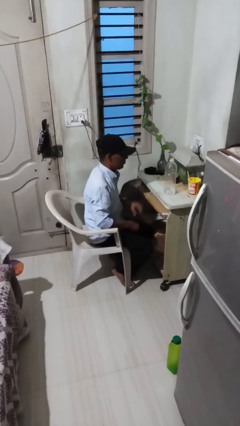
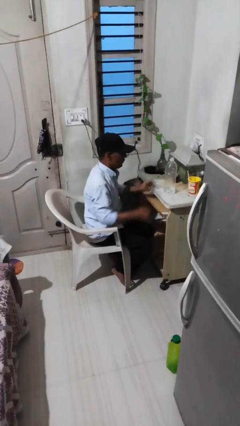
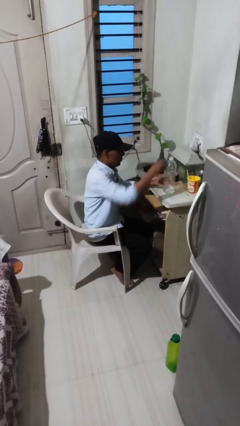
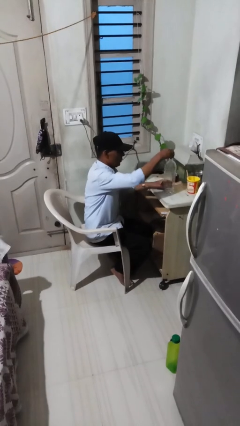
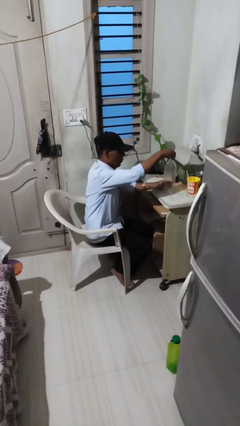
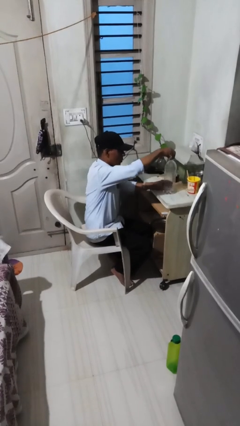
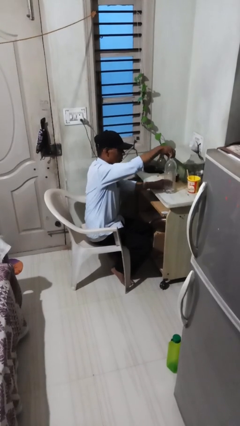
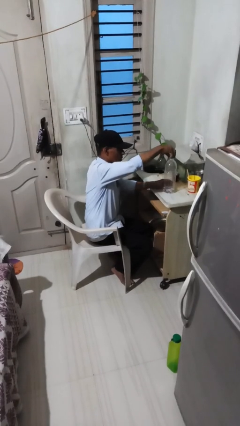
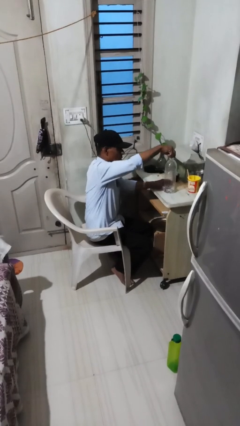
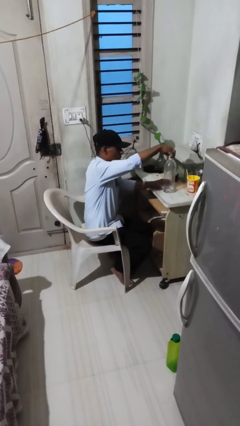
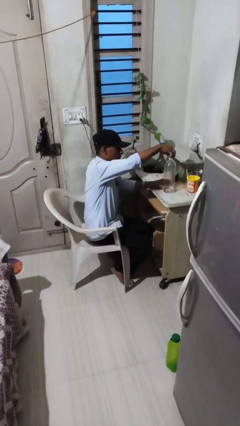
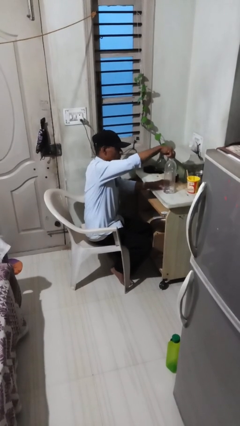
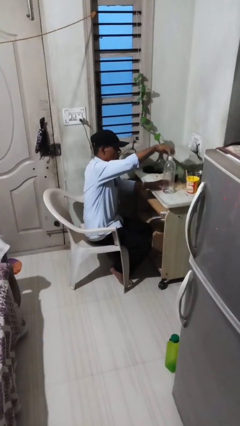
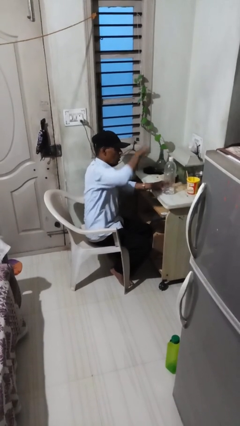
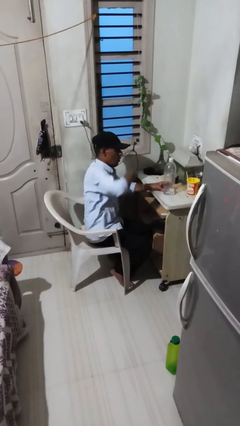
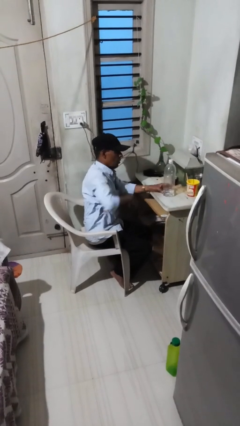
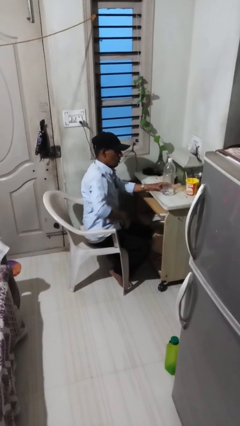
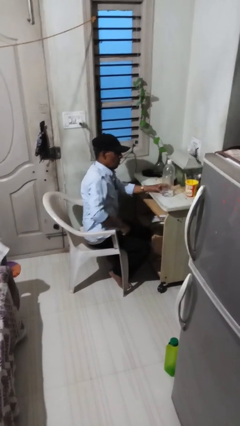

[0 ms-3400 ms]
person screws lid to bottle

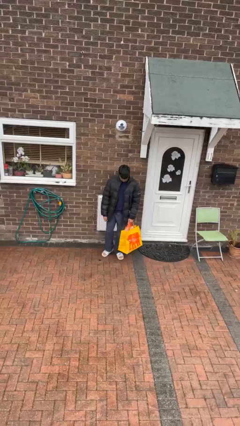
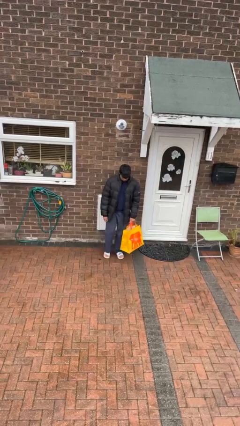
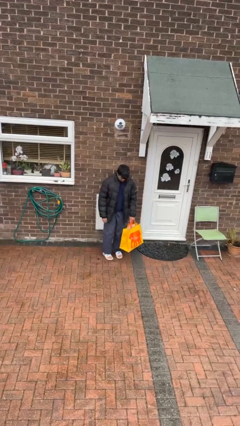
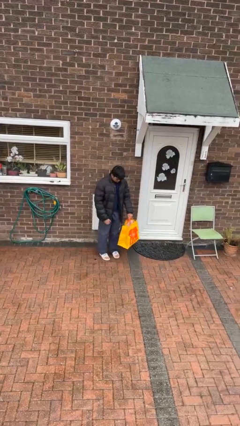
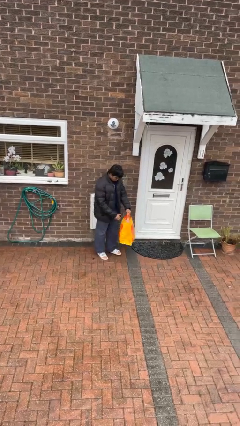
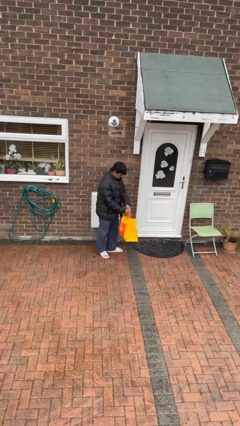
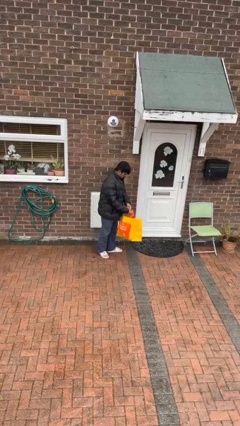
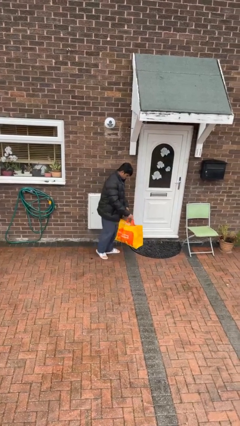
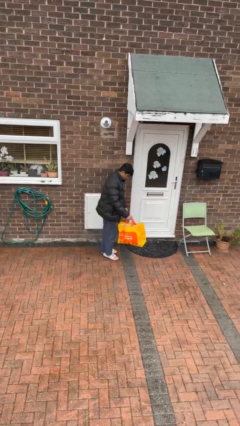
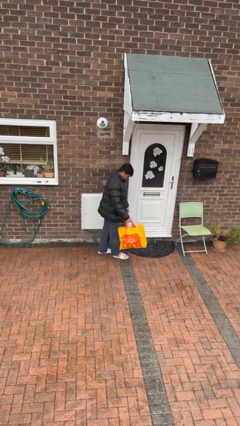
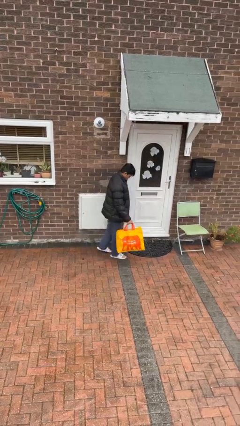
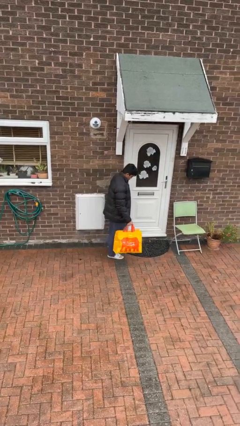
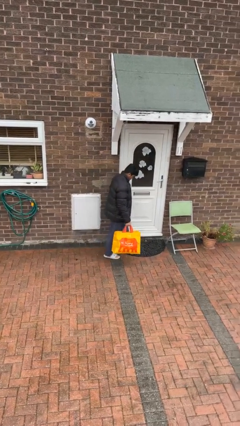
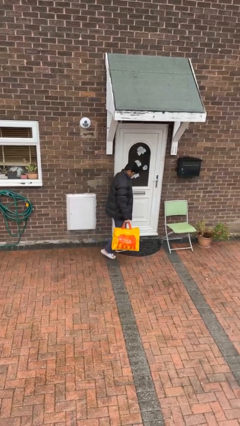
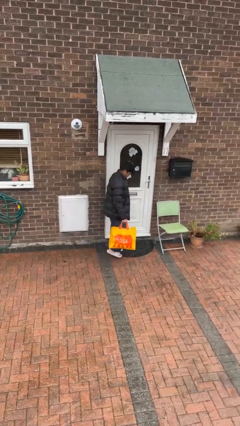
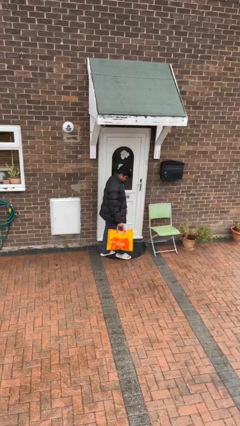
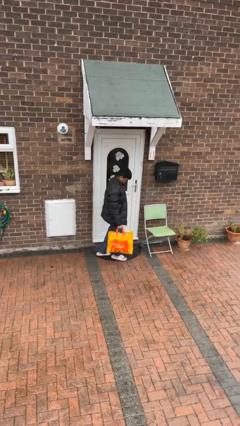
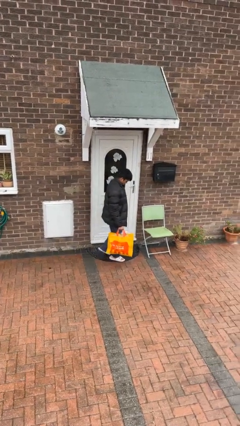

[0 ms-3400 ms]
person carries groceries

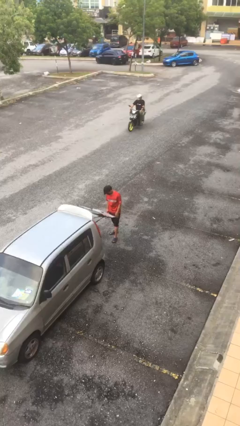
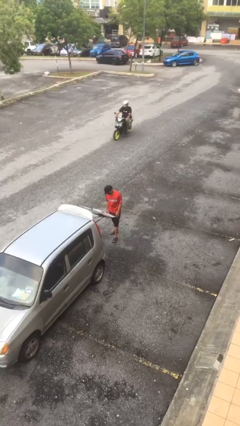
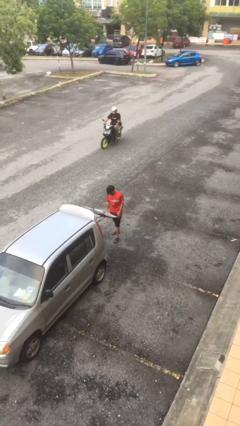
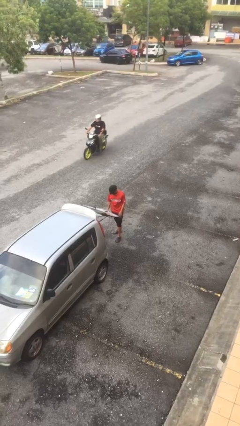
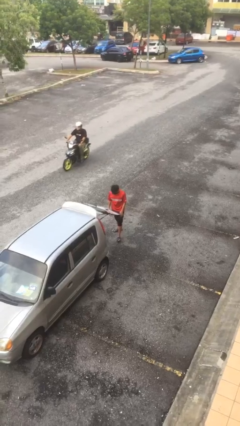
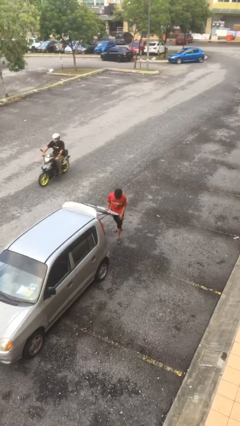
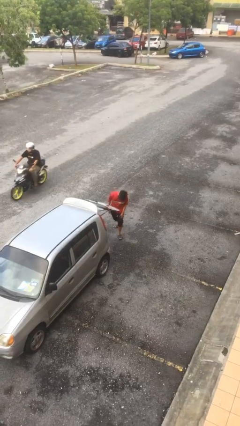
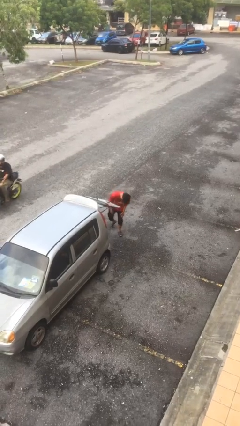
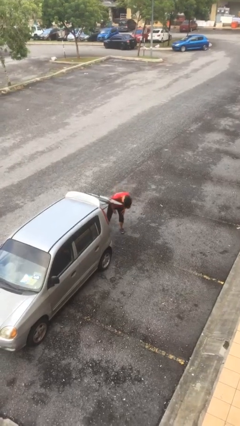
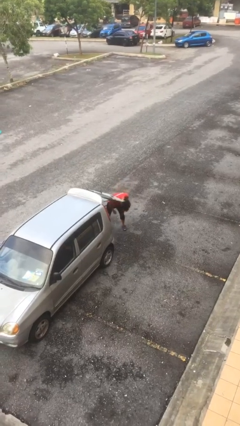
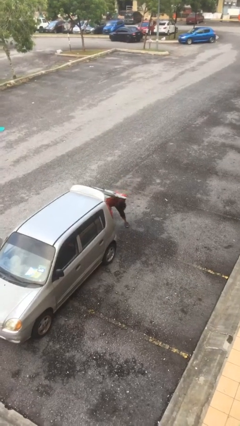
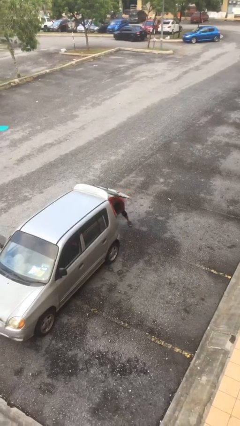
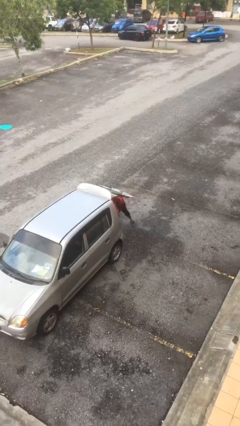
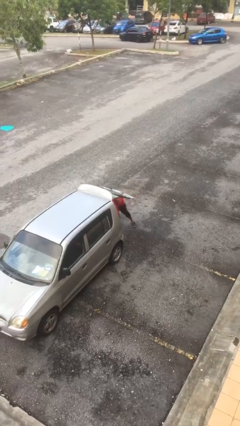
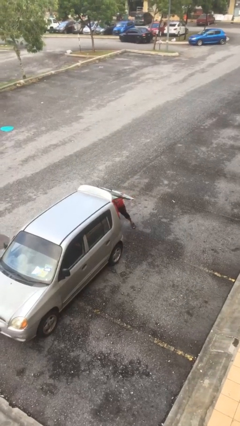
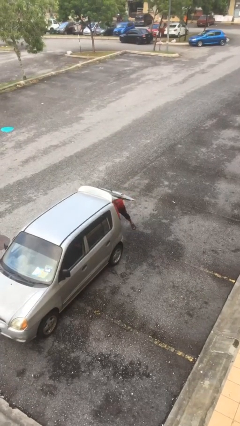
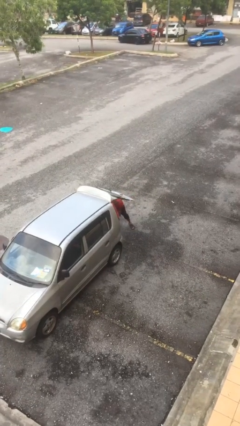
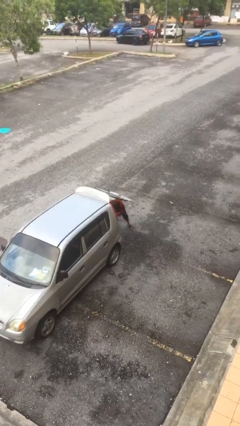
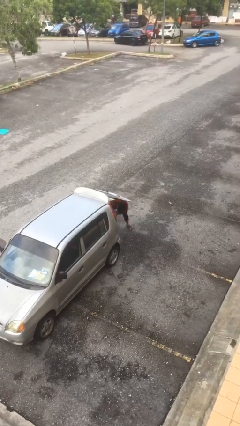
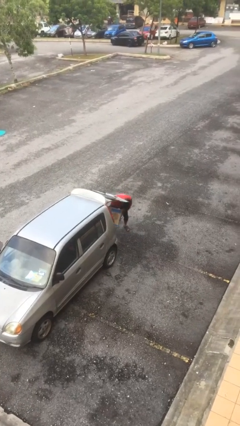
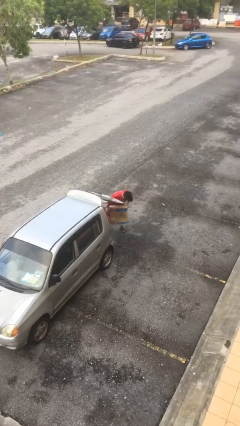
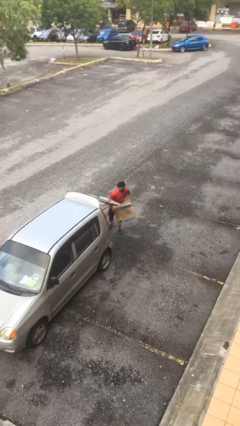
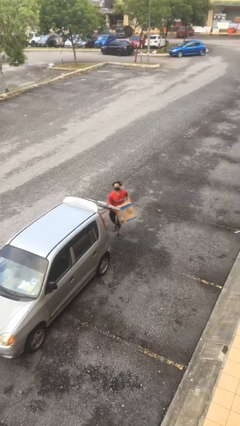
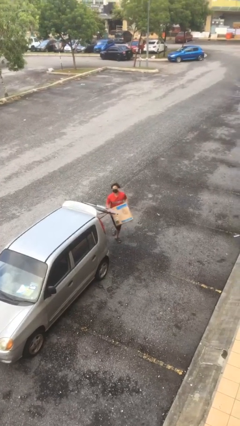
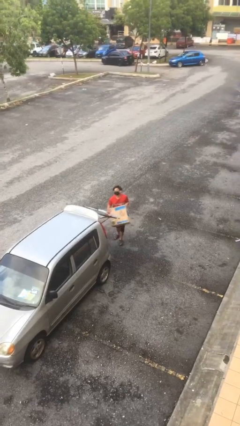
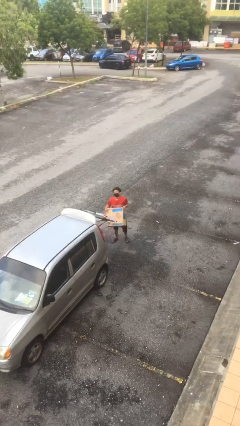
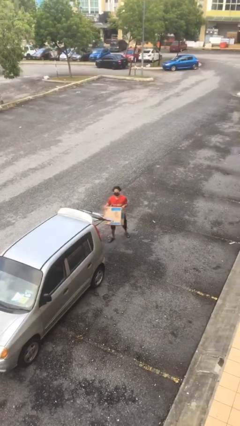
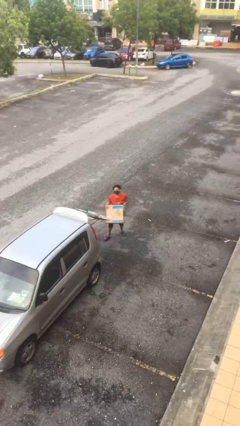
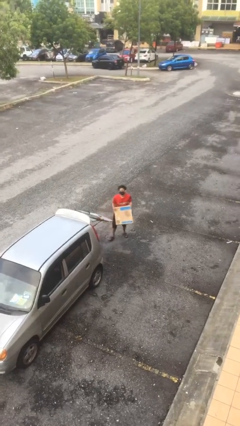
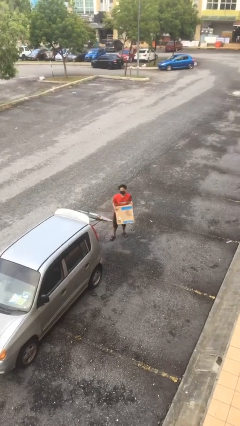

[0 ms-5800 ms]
person unloads car

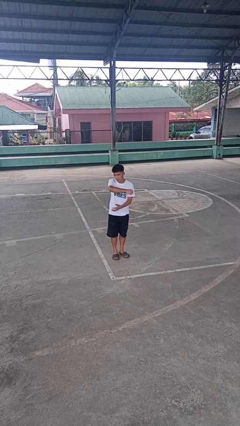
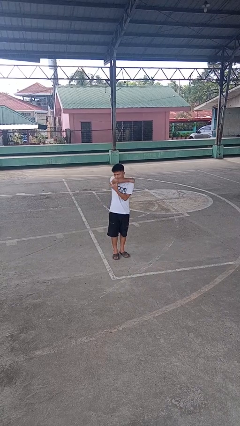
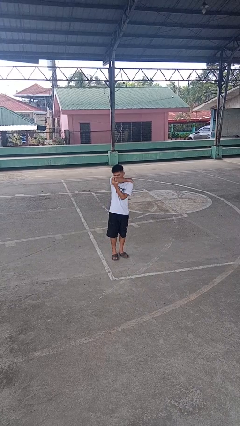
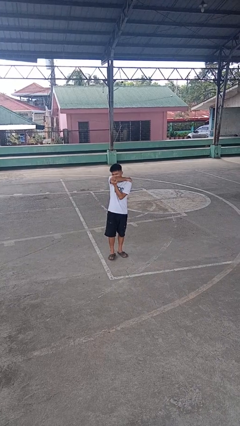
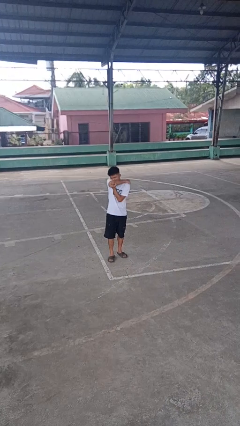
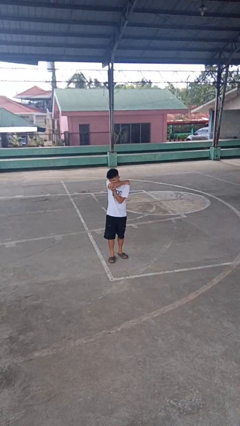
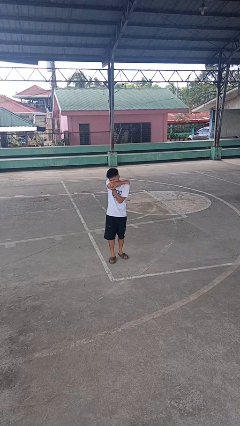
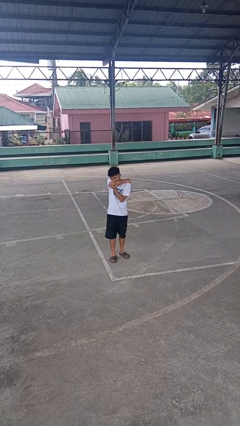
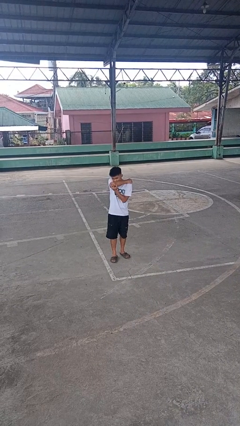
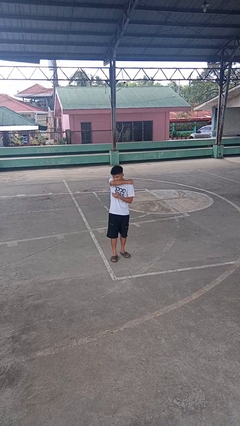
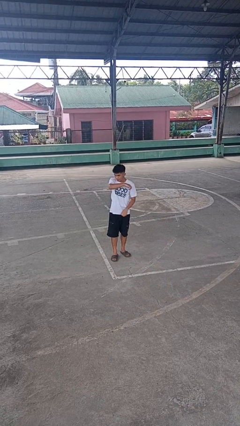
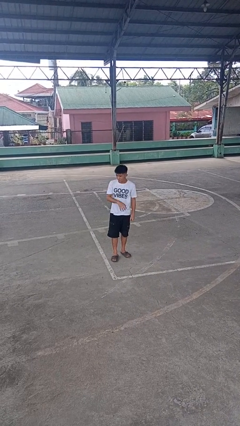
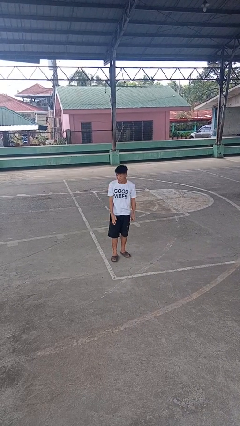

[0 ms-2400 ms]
person sneezes into arm

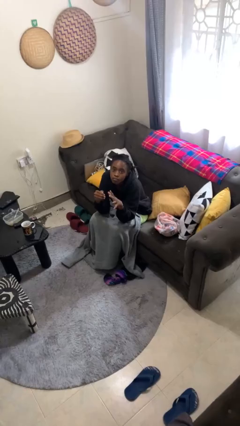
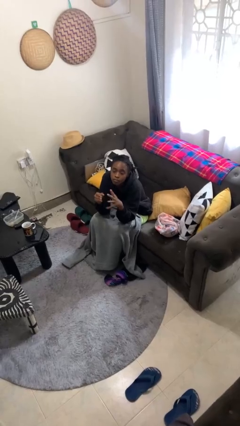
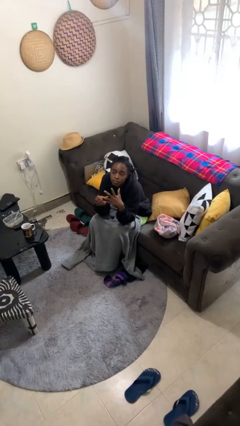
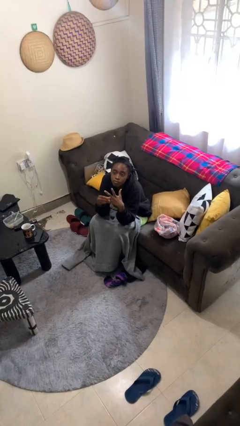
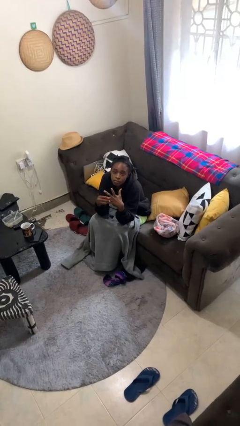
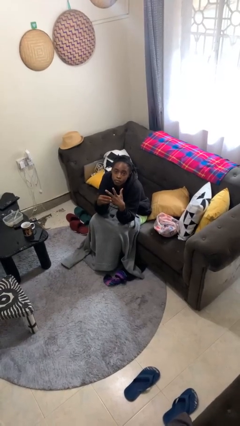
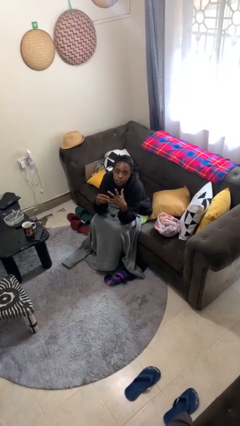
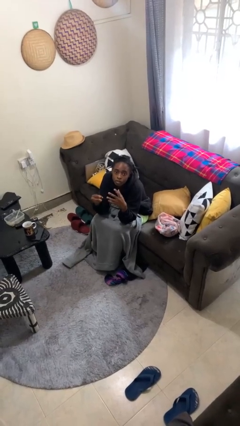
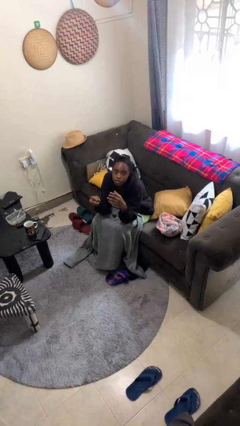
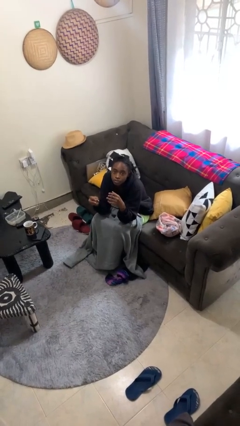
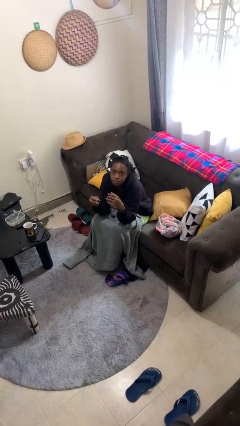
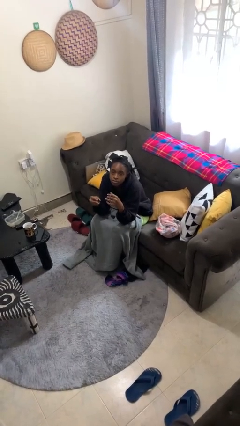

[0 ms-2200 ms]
person takes off ring

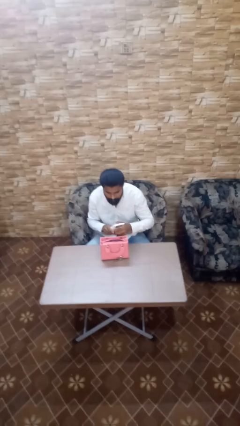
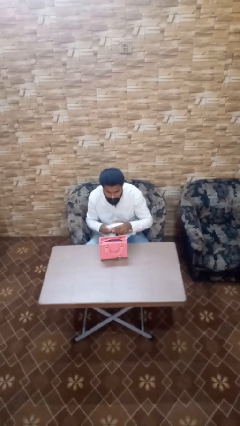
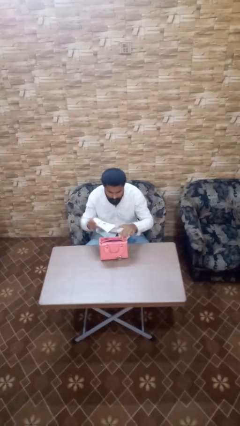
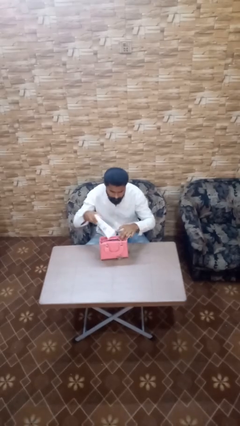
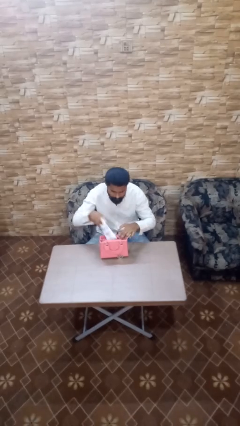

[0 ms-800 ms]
person puts object into purse
